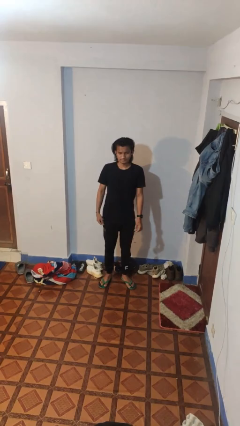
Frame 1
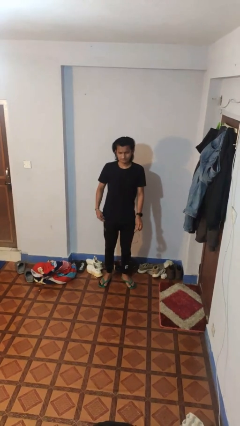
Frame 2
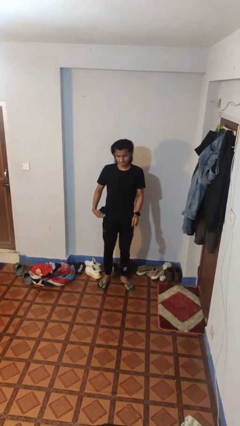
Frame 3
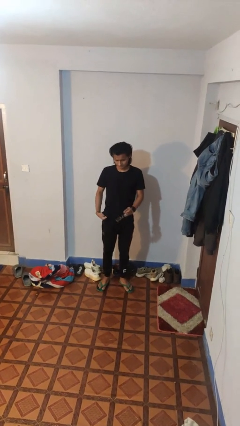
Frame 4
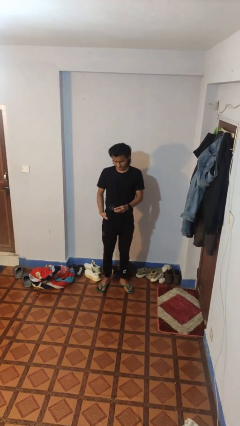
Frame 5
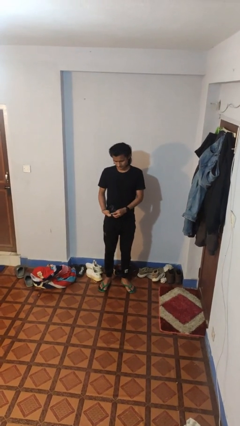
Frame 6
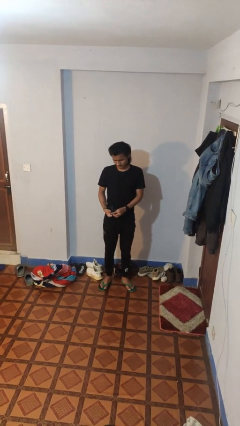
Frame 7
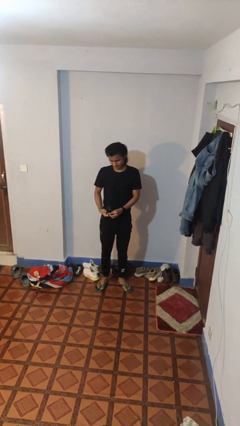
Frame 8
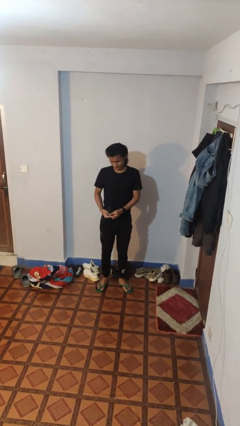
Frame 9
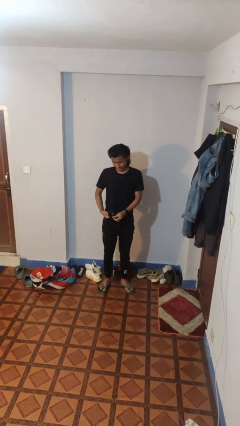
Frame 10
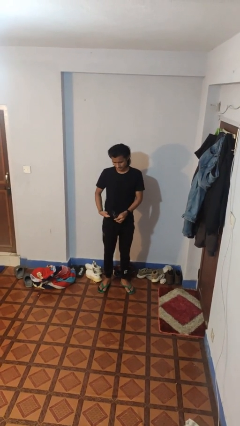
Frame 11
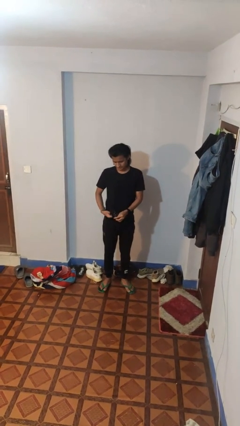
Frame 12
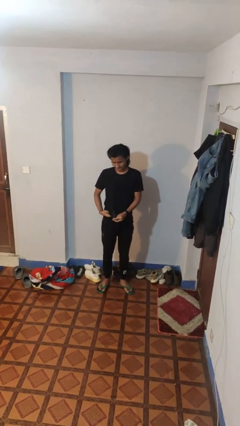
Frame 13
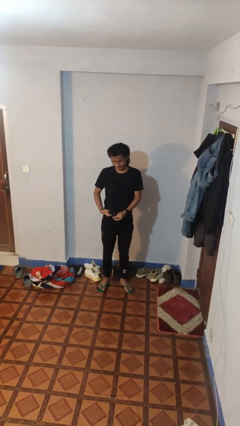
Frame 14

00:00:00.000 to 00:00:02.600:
person cleans eyeglasses

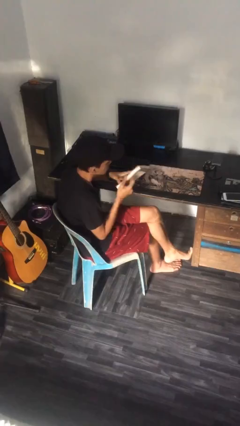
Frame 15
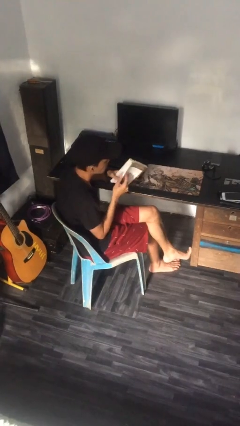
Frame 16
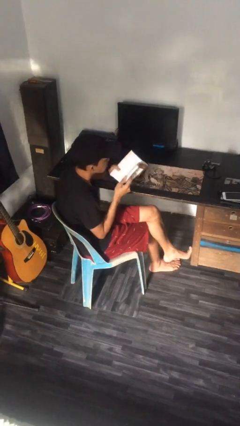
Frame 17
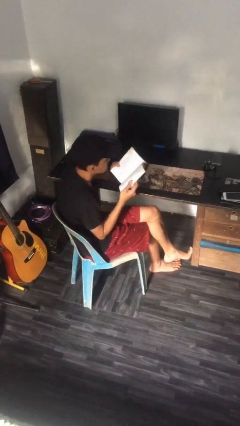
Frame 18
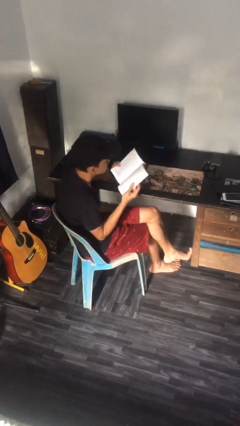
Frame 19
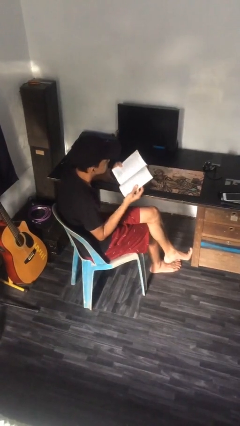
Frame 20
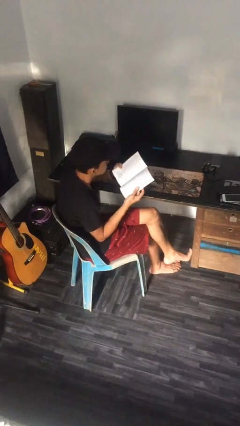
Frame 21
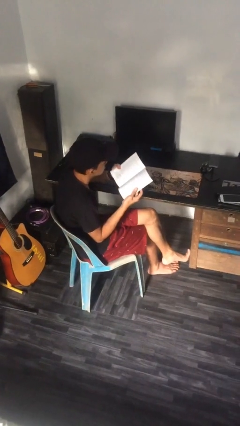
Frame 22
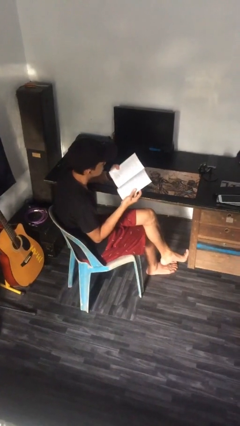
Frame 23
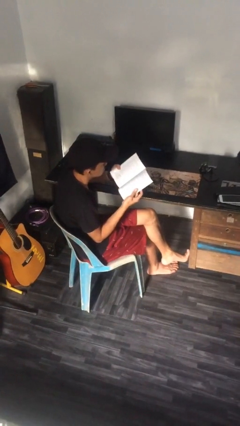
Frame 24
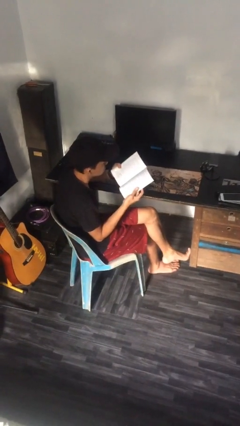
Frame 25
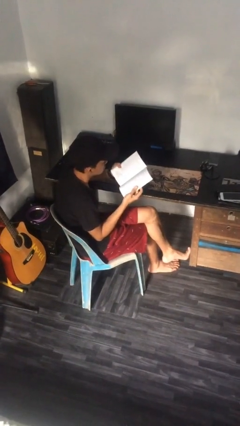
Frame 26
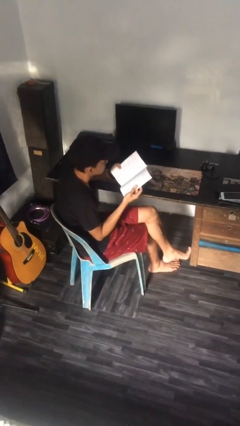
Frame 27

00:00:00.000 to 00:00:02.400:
person reads document

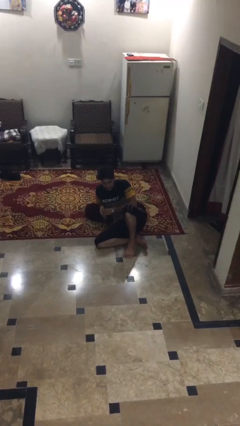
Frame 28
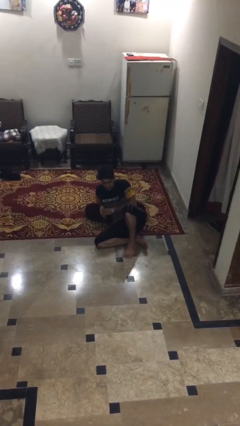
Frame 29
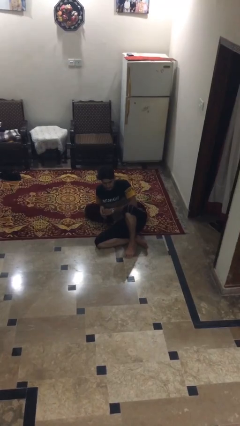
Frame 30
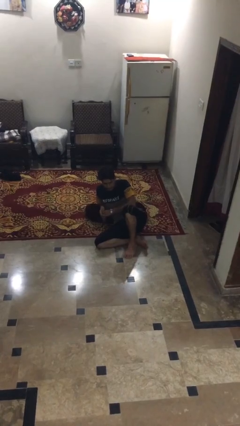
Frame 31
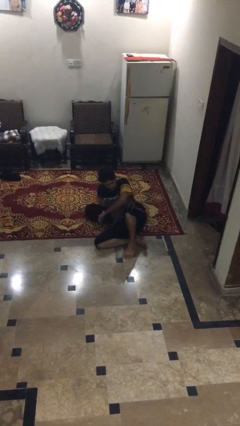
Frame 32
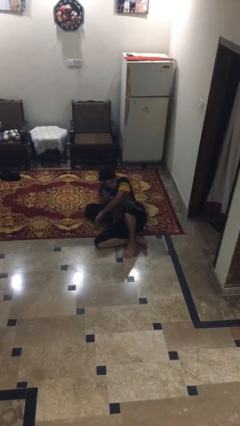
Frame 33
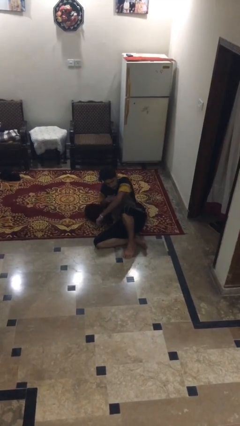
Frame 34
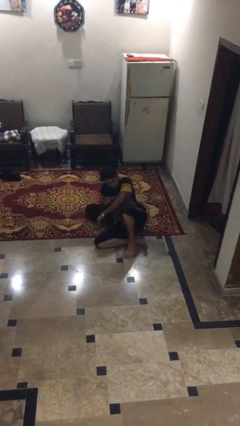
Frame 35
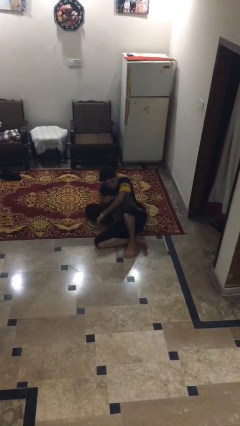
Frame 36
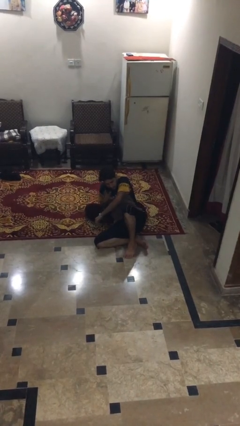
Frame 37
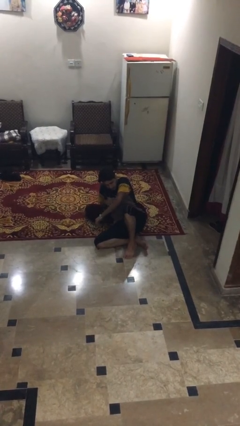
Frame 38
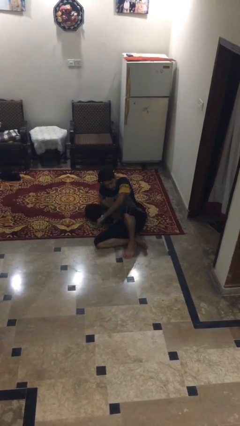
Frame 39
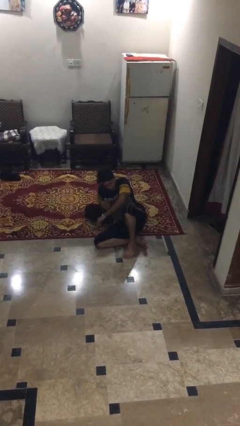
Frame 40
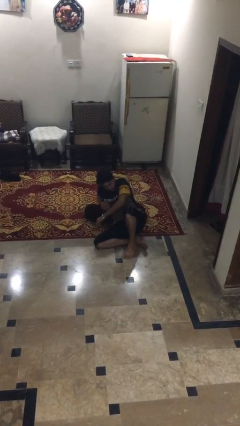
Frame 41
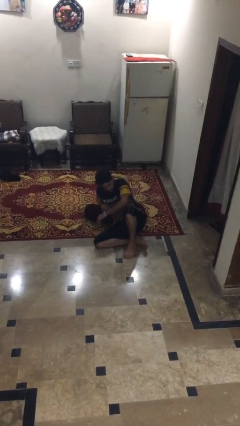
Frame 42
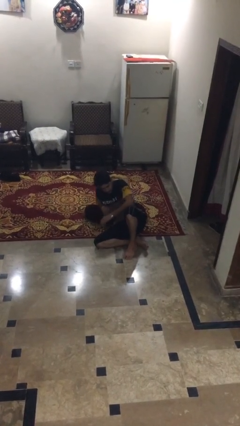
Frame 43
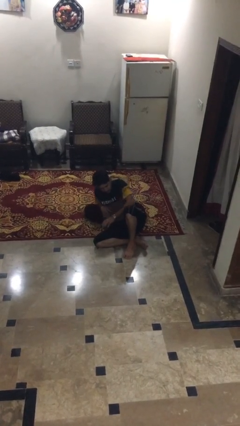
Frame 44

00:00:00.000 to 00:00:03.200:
person swats bug

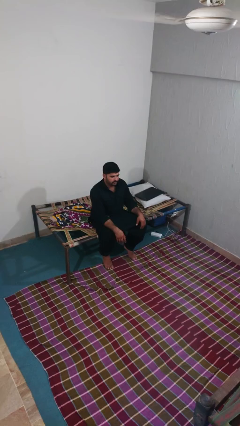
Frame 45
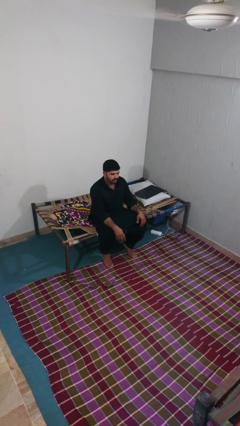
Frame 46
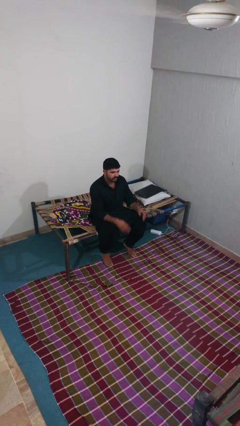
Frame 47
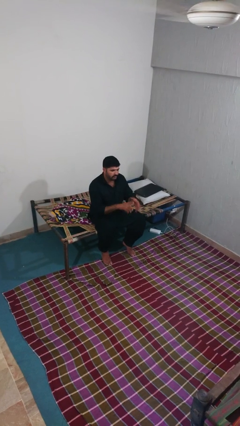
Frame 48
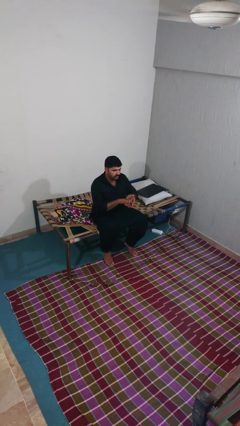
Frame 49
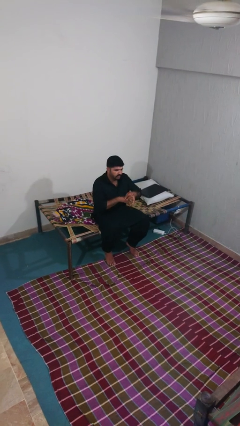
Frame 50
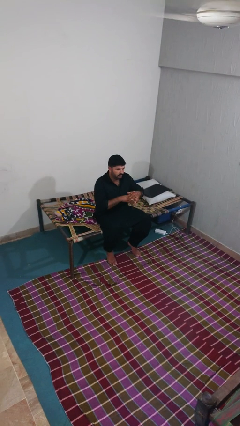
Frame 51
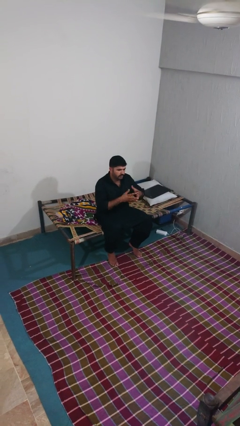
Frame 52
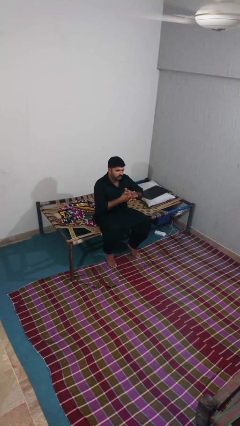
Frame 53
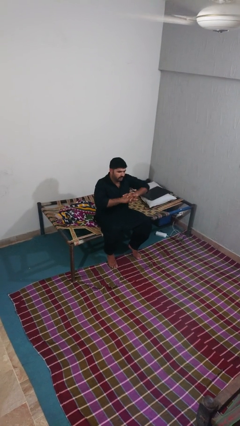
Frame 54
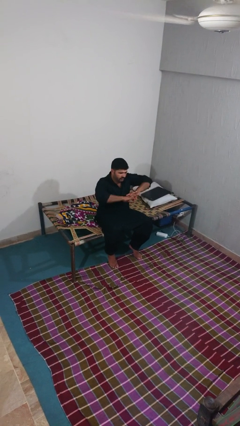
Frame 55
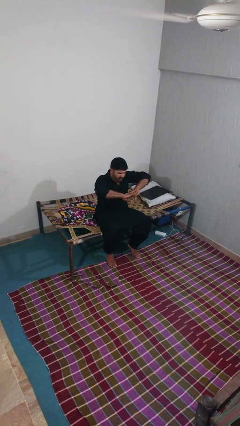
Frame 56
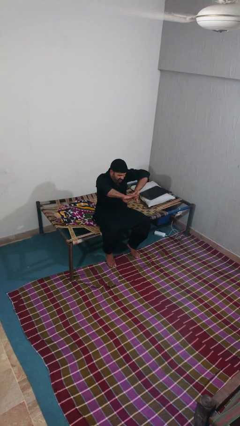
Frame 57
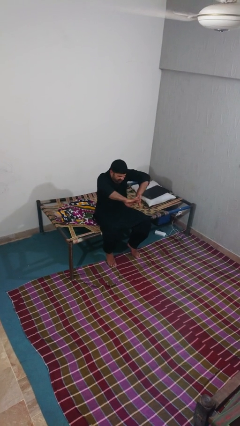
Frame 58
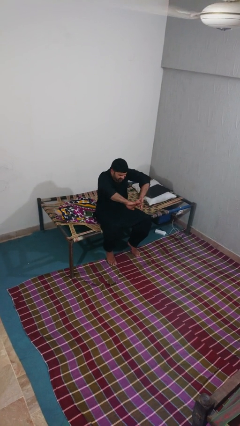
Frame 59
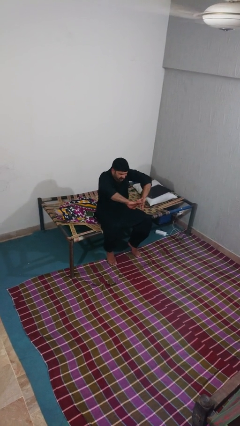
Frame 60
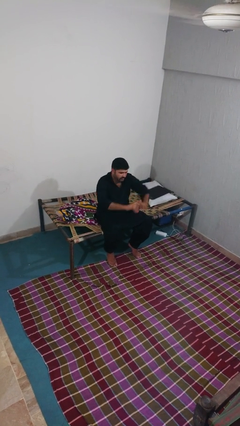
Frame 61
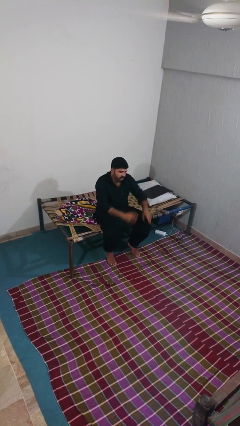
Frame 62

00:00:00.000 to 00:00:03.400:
person cracks knuckles

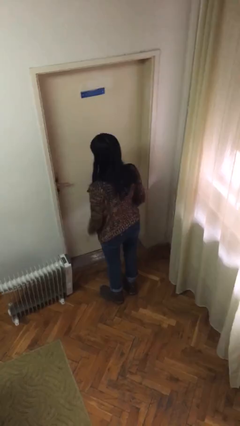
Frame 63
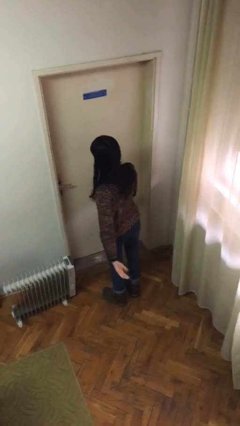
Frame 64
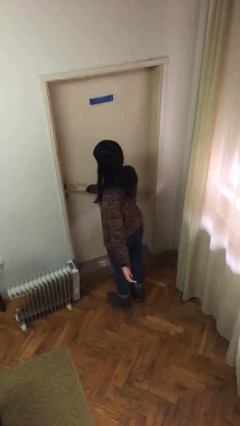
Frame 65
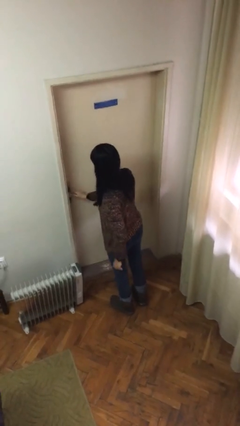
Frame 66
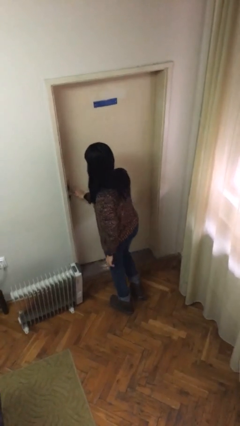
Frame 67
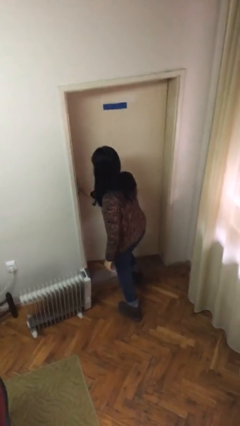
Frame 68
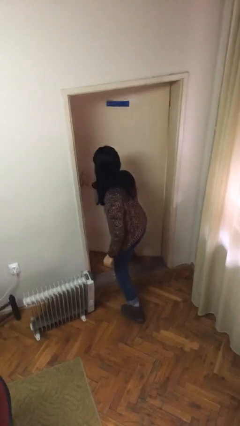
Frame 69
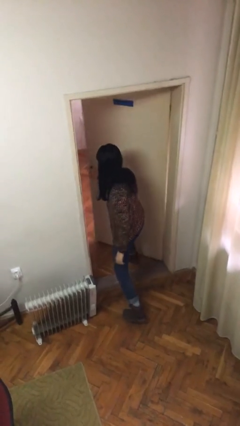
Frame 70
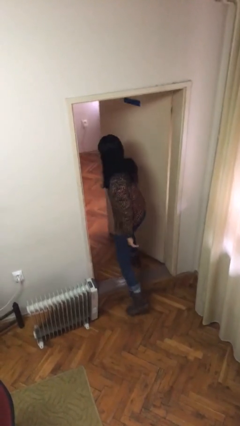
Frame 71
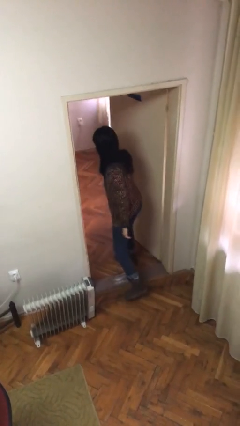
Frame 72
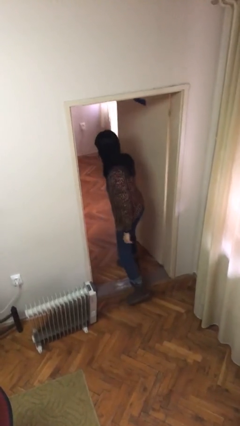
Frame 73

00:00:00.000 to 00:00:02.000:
person opens facility door

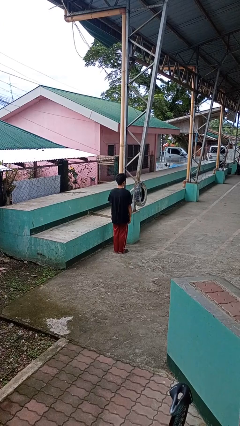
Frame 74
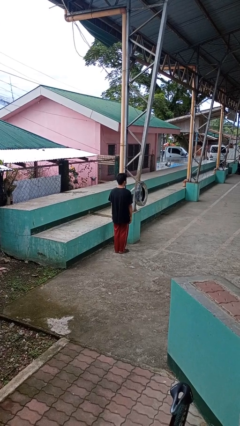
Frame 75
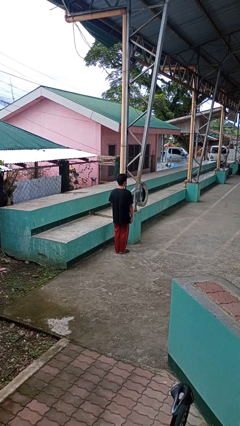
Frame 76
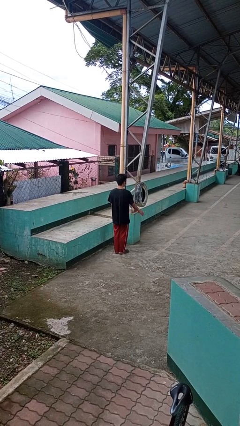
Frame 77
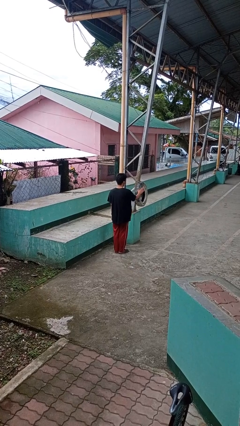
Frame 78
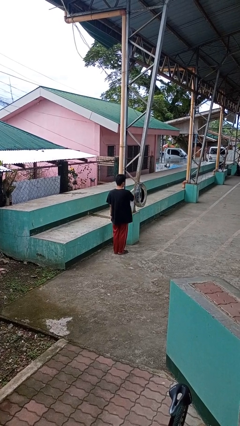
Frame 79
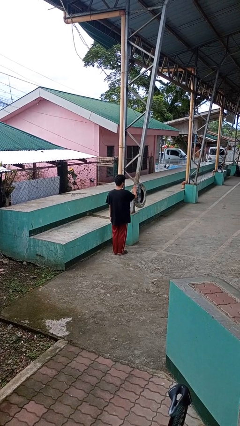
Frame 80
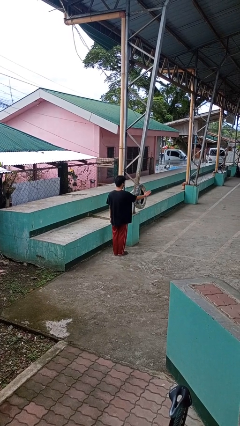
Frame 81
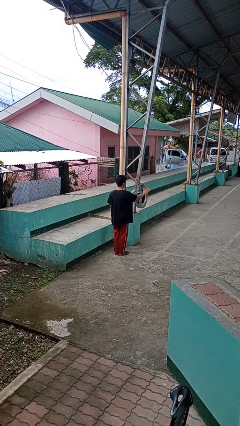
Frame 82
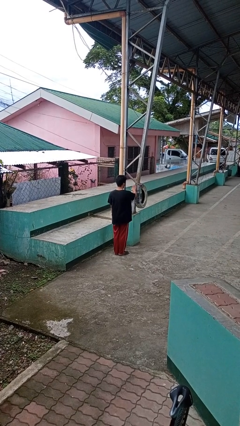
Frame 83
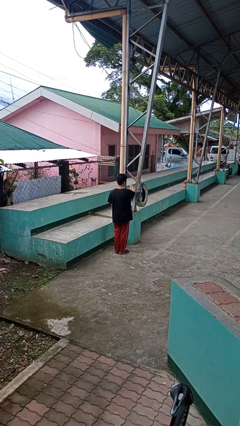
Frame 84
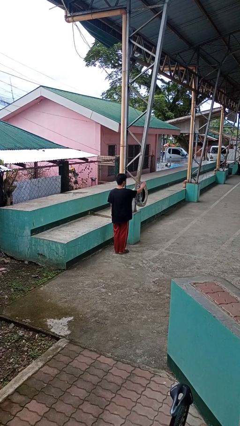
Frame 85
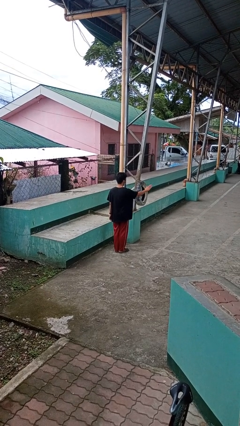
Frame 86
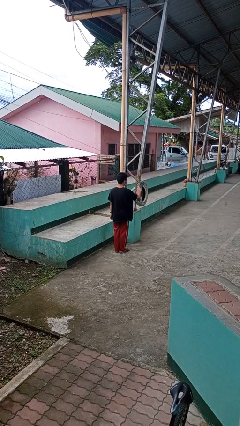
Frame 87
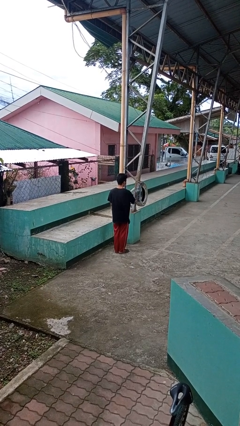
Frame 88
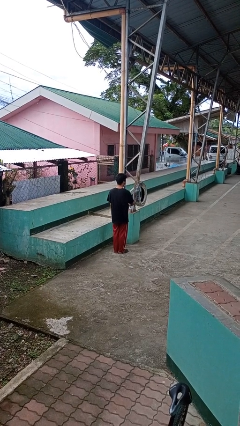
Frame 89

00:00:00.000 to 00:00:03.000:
person waves hand over object

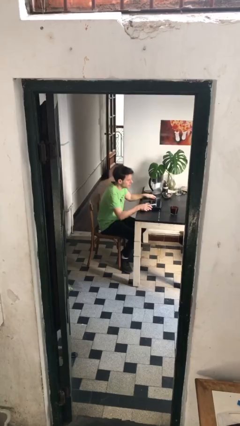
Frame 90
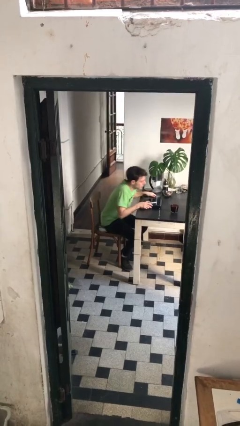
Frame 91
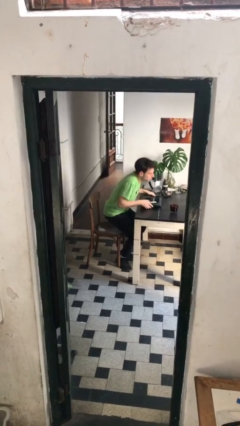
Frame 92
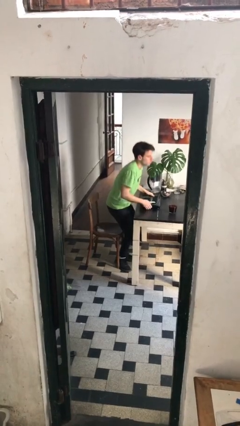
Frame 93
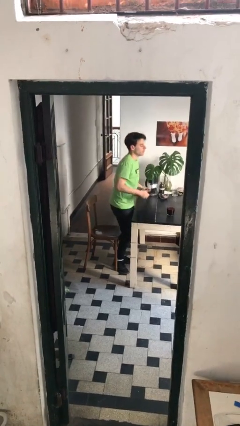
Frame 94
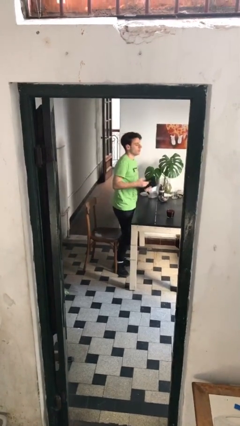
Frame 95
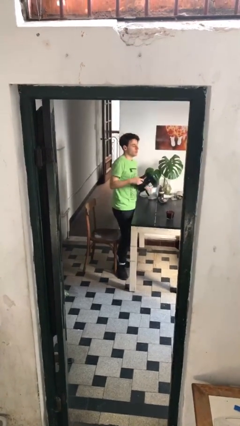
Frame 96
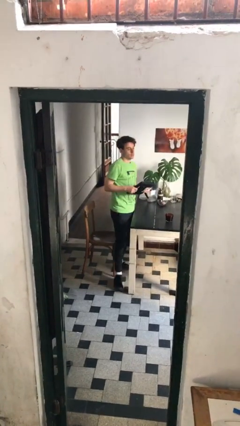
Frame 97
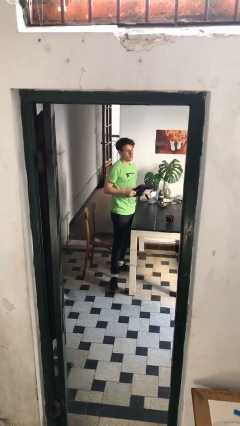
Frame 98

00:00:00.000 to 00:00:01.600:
person stands up
